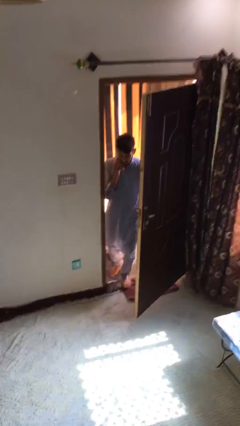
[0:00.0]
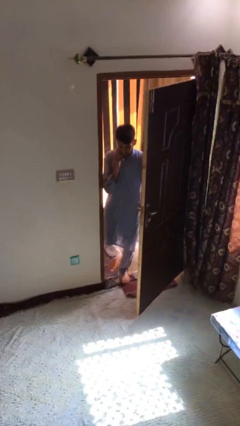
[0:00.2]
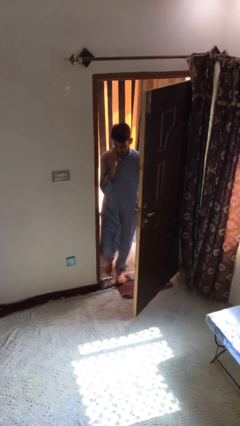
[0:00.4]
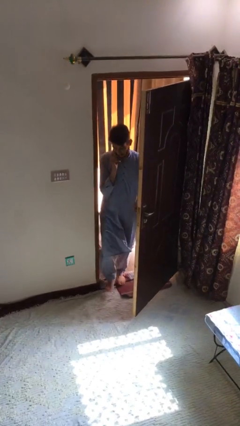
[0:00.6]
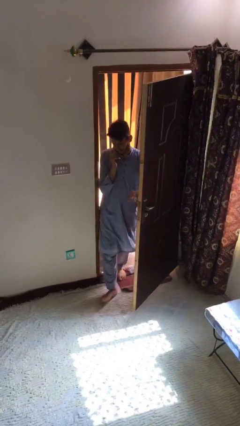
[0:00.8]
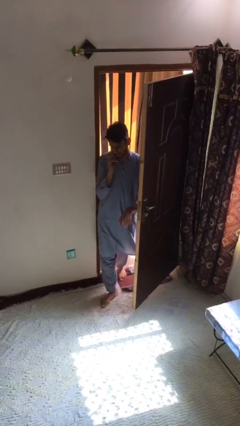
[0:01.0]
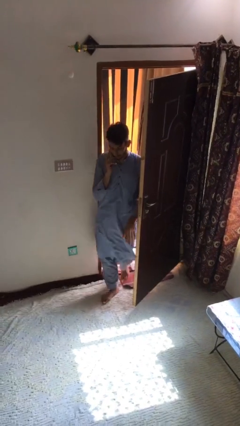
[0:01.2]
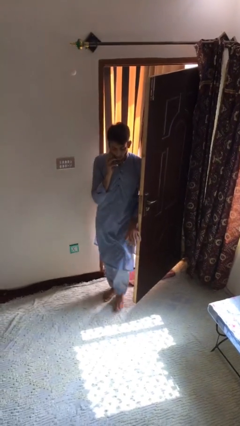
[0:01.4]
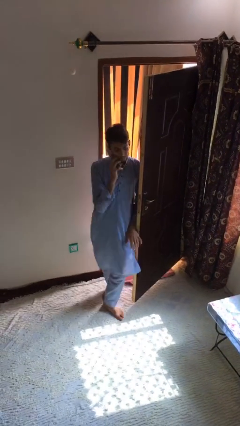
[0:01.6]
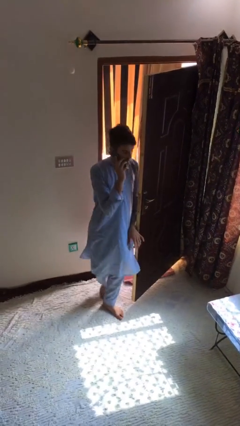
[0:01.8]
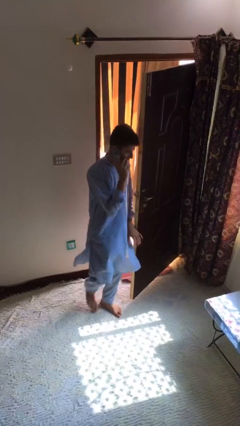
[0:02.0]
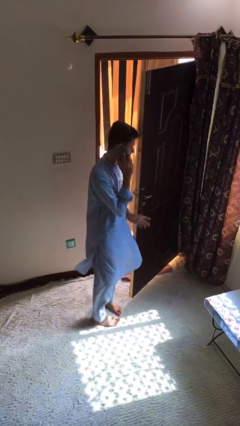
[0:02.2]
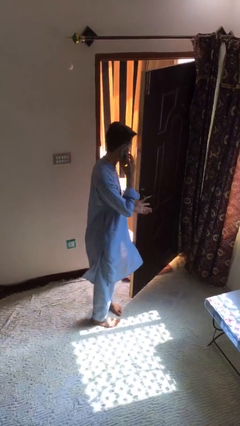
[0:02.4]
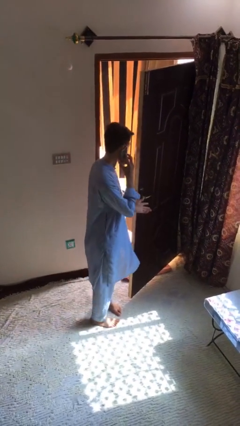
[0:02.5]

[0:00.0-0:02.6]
person enters scene through structure

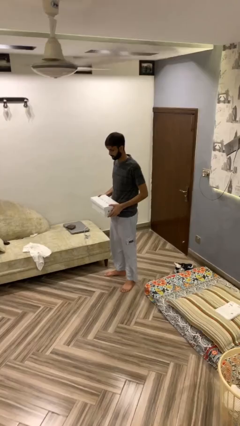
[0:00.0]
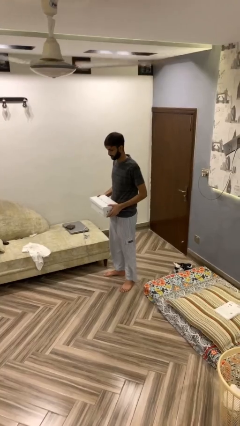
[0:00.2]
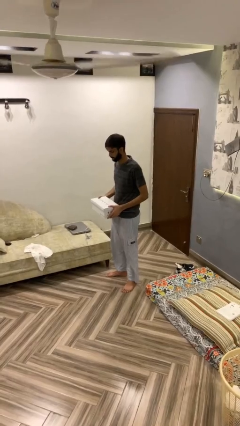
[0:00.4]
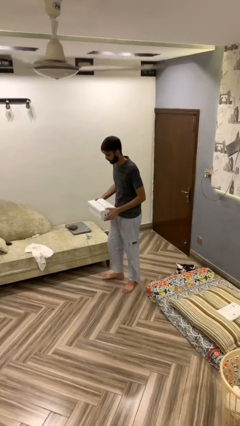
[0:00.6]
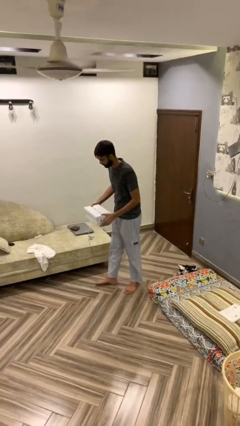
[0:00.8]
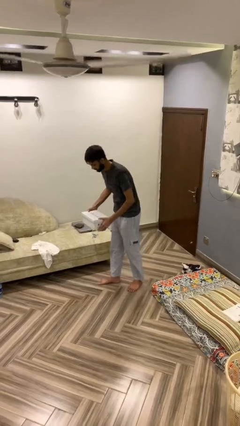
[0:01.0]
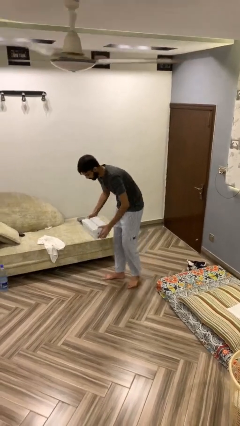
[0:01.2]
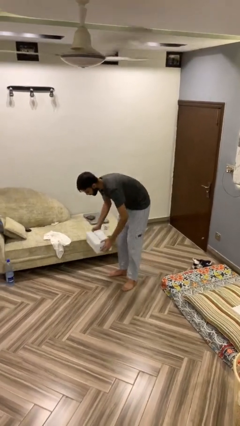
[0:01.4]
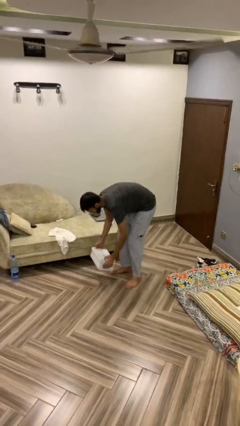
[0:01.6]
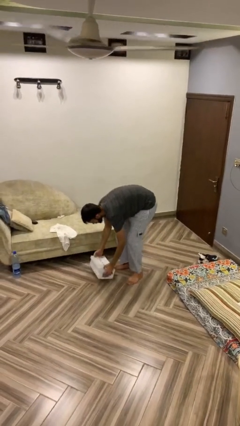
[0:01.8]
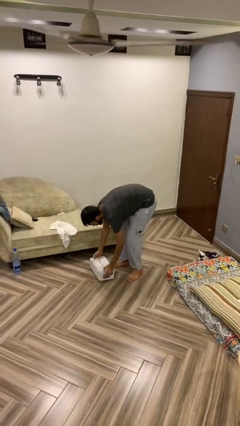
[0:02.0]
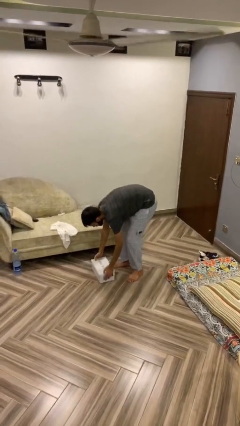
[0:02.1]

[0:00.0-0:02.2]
person puts down object on floor

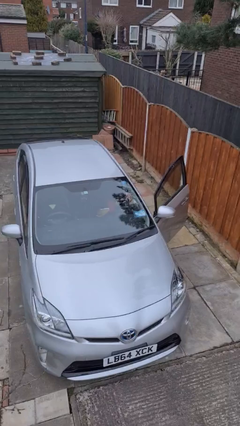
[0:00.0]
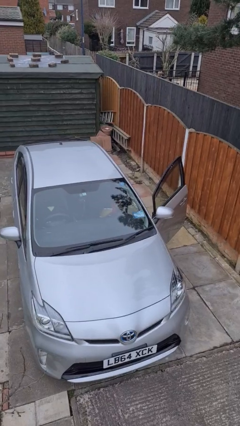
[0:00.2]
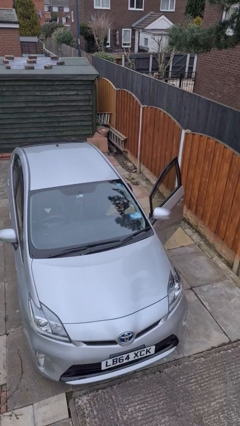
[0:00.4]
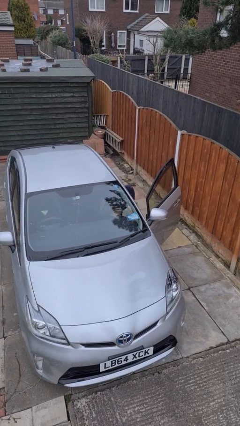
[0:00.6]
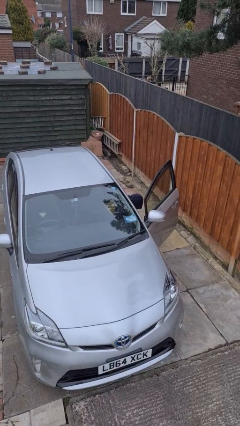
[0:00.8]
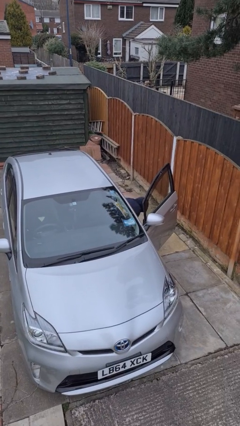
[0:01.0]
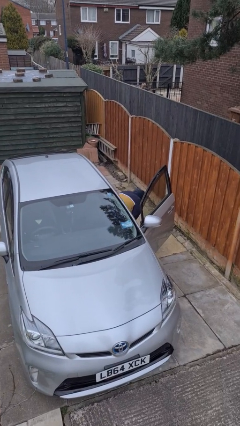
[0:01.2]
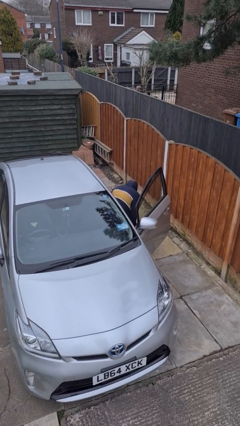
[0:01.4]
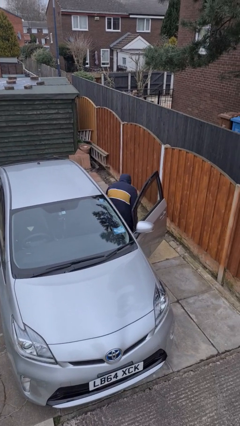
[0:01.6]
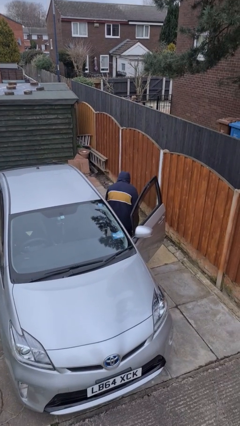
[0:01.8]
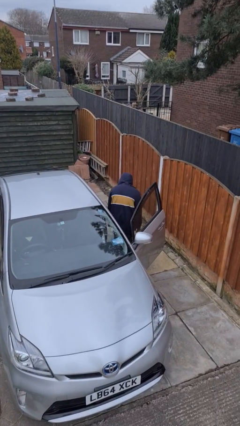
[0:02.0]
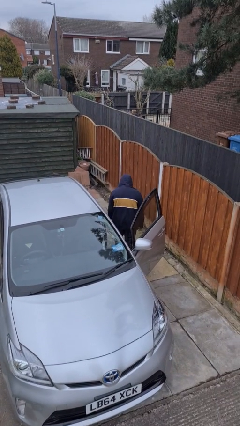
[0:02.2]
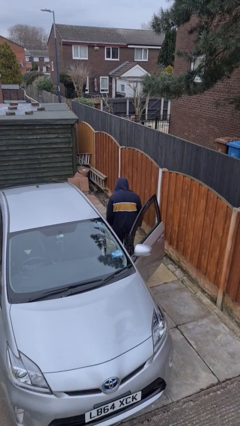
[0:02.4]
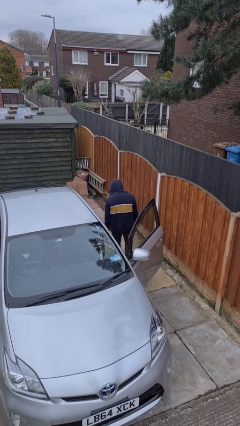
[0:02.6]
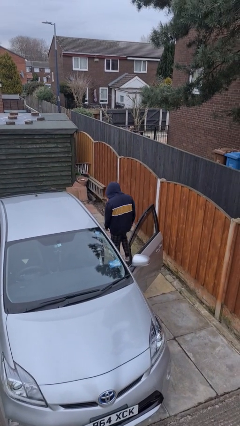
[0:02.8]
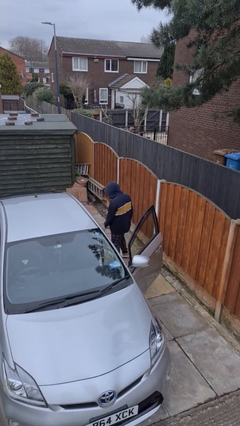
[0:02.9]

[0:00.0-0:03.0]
person exits car

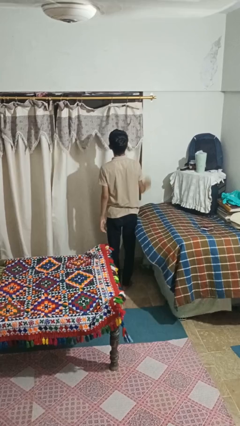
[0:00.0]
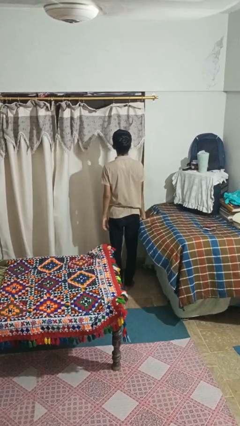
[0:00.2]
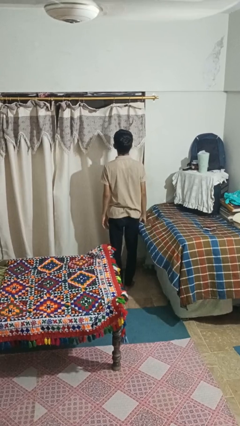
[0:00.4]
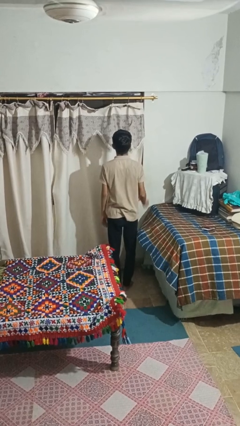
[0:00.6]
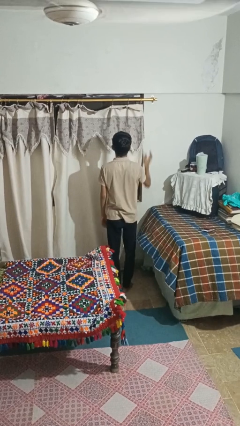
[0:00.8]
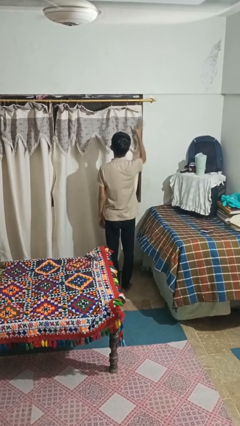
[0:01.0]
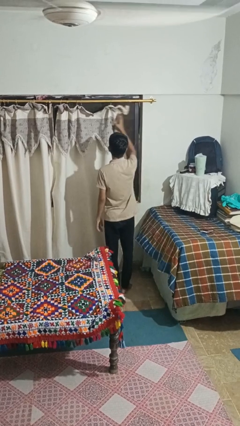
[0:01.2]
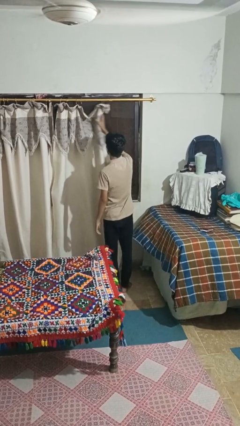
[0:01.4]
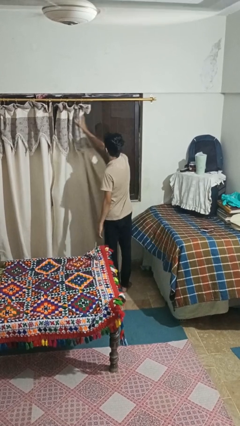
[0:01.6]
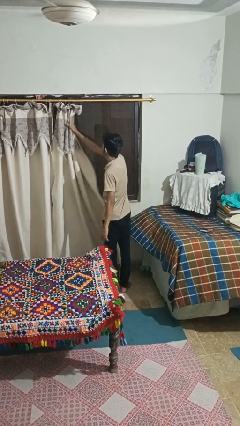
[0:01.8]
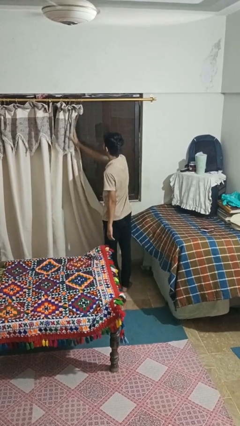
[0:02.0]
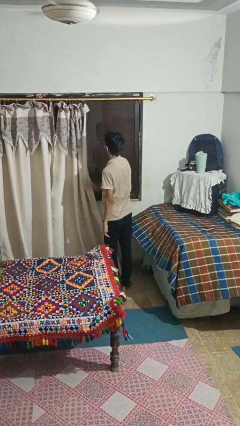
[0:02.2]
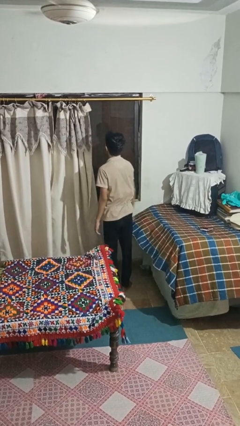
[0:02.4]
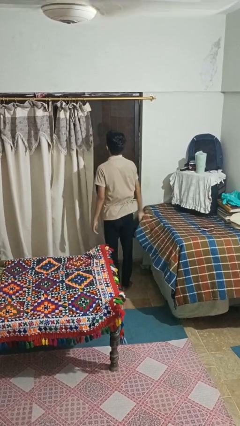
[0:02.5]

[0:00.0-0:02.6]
person opens curtains

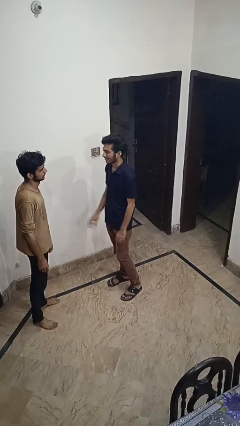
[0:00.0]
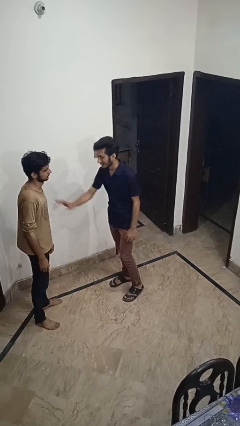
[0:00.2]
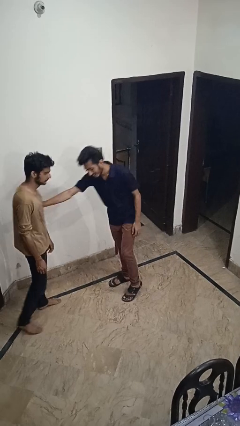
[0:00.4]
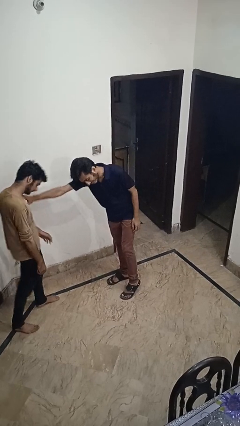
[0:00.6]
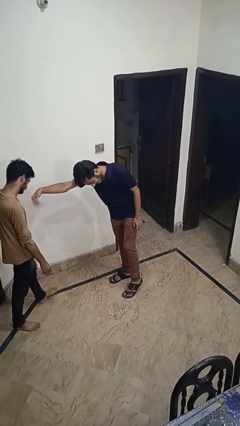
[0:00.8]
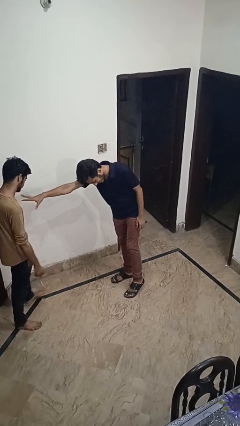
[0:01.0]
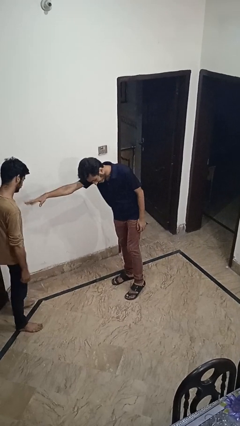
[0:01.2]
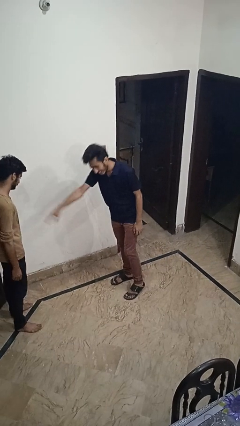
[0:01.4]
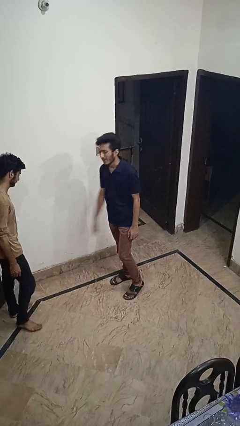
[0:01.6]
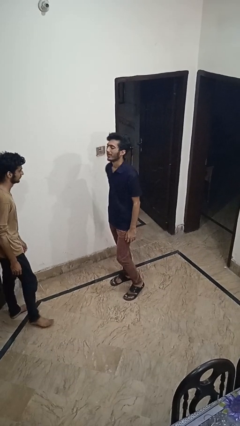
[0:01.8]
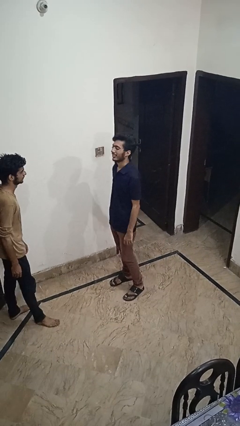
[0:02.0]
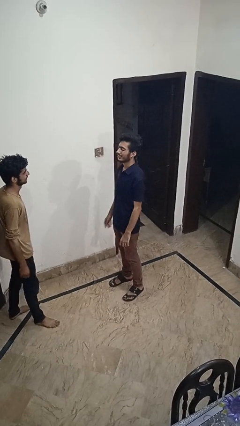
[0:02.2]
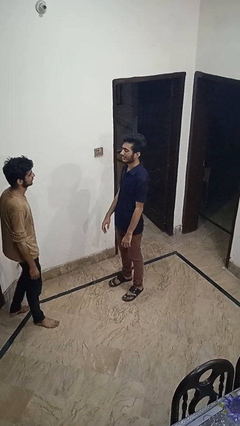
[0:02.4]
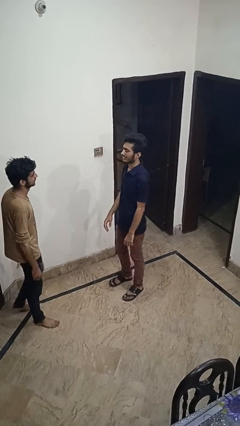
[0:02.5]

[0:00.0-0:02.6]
person shoves person

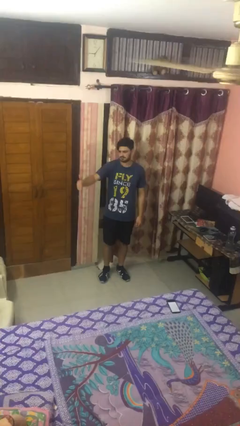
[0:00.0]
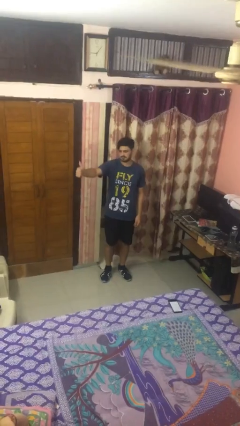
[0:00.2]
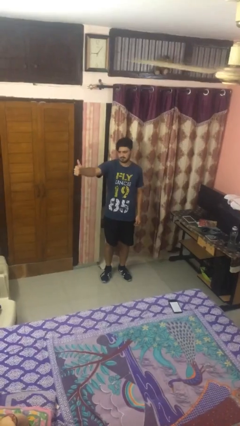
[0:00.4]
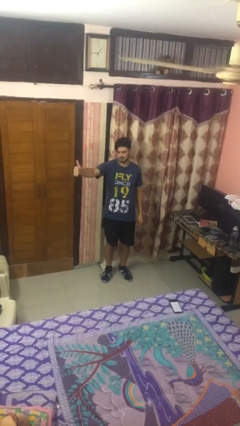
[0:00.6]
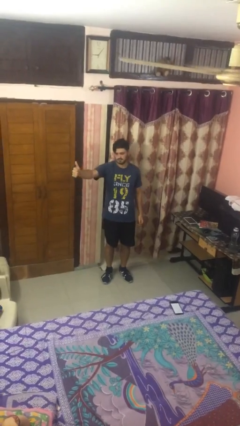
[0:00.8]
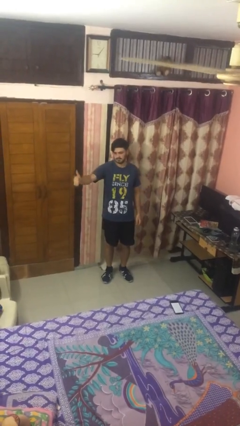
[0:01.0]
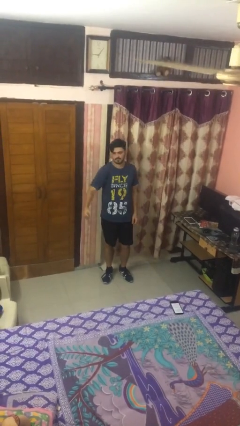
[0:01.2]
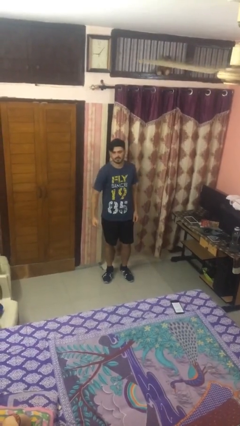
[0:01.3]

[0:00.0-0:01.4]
person gestures thumbs up

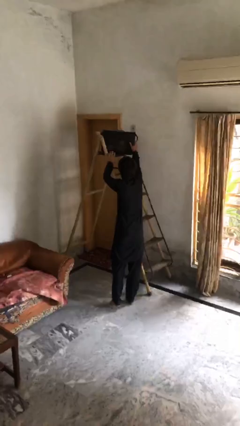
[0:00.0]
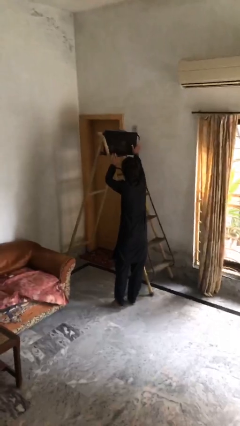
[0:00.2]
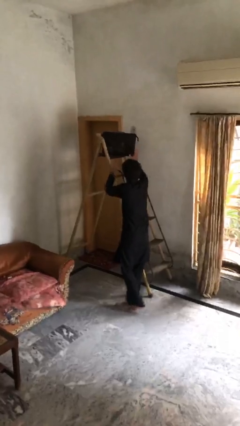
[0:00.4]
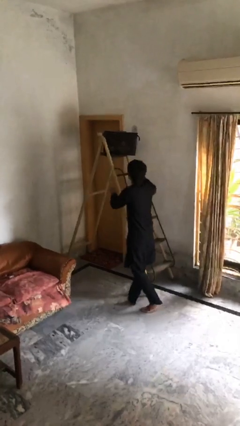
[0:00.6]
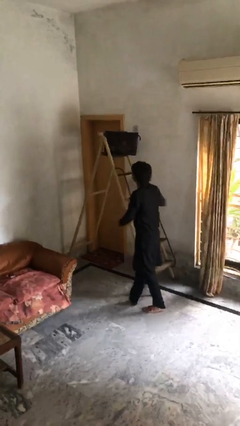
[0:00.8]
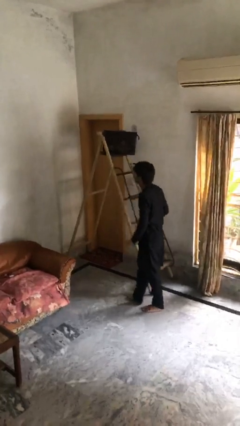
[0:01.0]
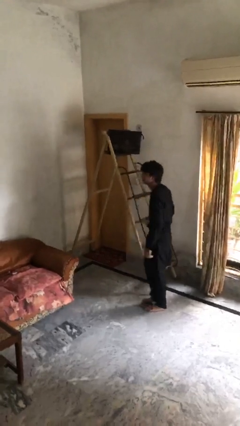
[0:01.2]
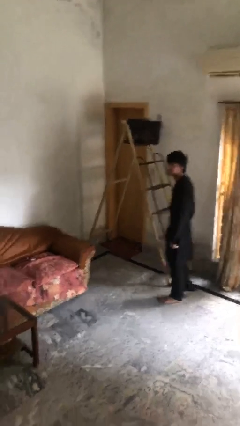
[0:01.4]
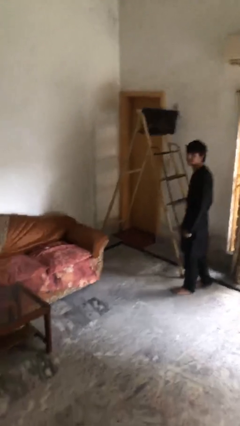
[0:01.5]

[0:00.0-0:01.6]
person puts down object on shelf

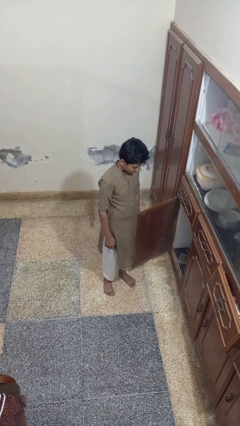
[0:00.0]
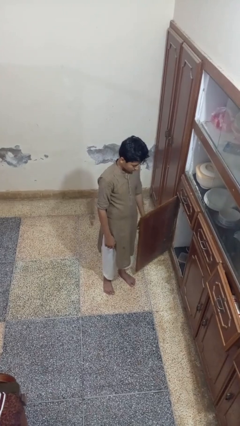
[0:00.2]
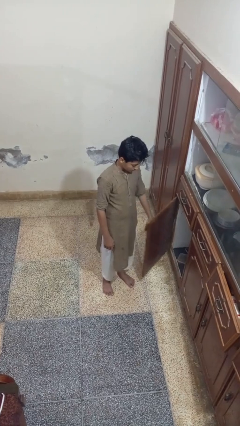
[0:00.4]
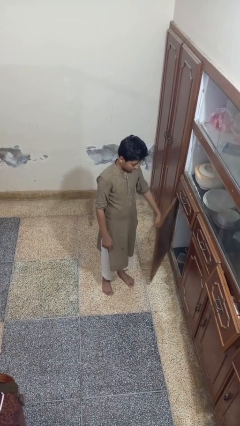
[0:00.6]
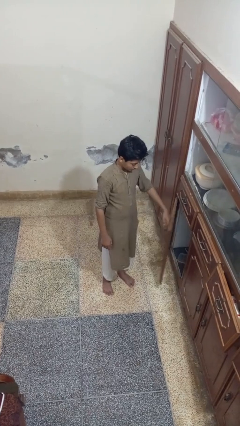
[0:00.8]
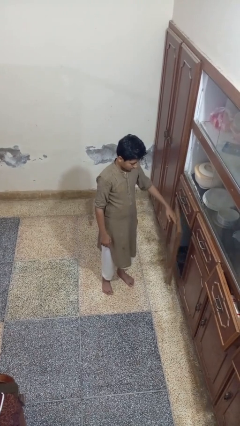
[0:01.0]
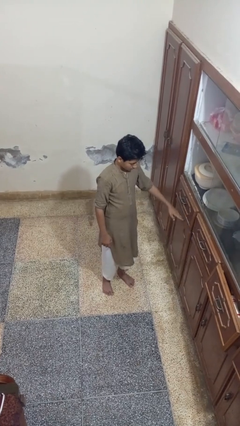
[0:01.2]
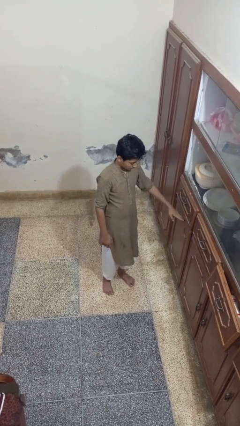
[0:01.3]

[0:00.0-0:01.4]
person closes cabinet
